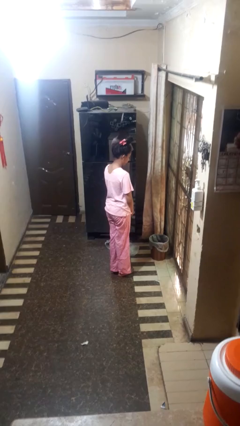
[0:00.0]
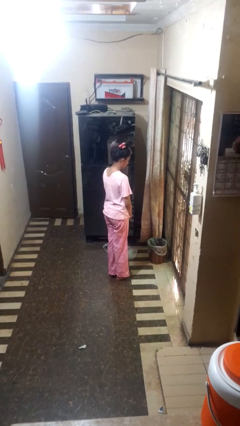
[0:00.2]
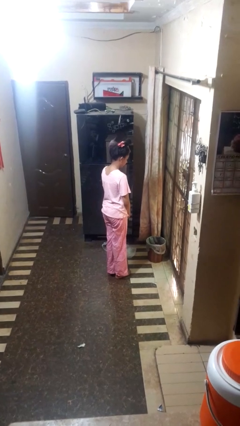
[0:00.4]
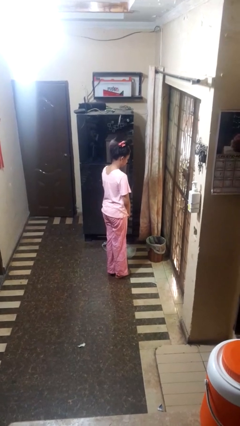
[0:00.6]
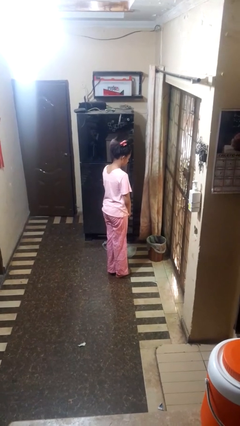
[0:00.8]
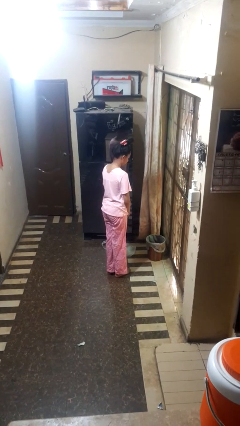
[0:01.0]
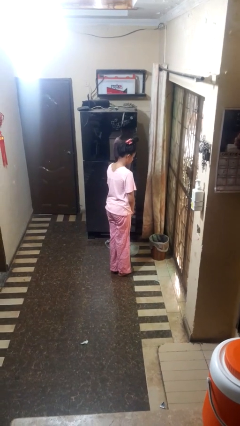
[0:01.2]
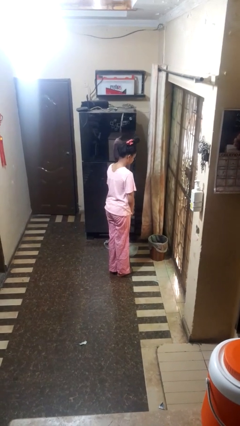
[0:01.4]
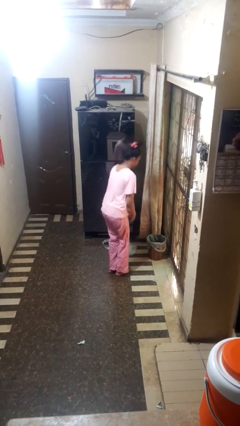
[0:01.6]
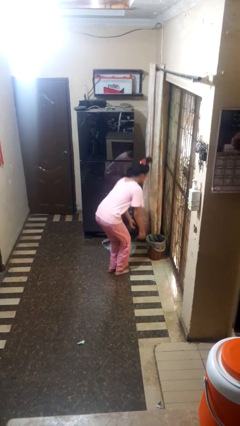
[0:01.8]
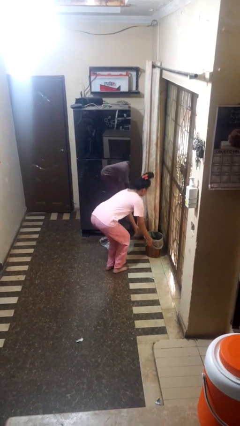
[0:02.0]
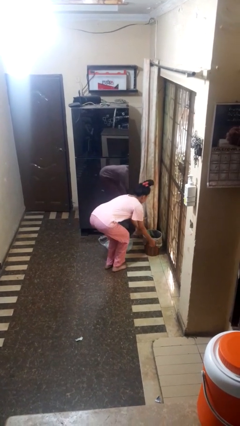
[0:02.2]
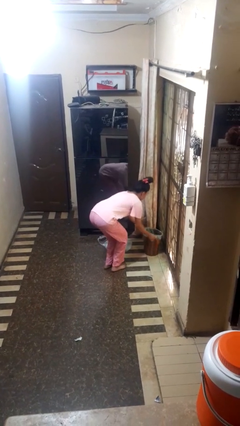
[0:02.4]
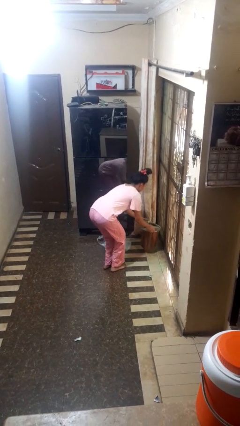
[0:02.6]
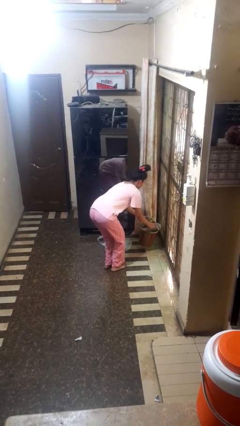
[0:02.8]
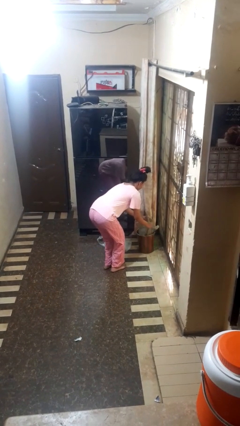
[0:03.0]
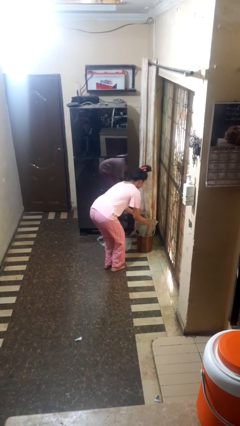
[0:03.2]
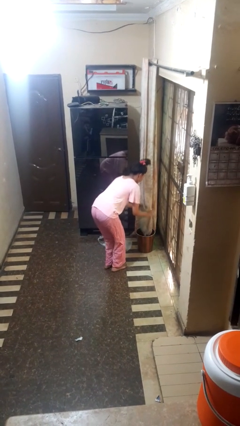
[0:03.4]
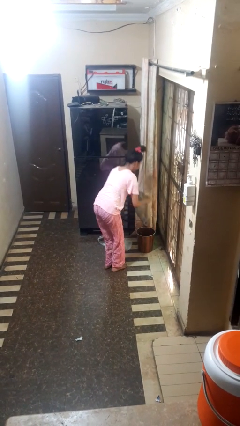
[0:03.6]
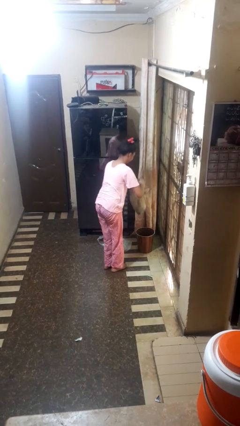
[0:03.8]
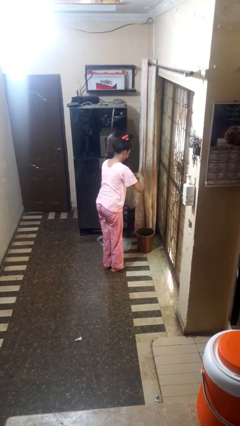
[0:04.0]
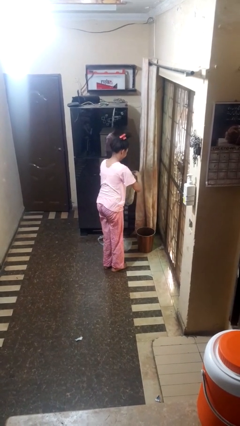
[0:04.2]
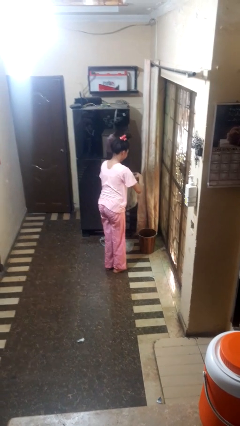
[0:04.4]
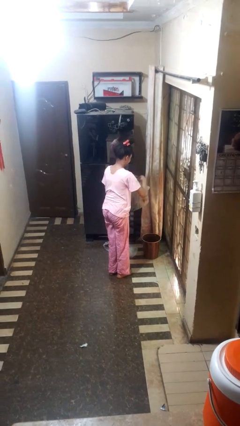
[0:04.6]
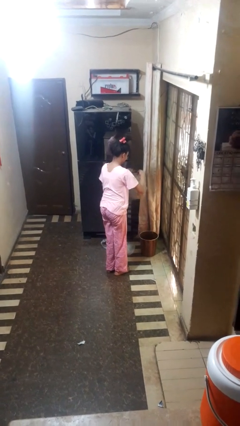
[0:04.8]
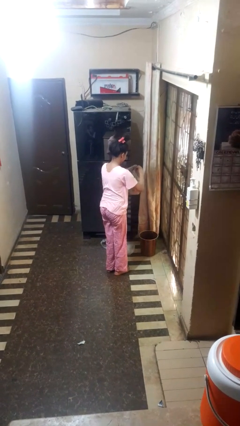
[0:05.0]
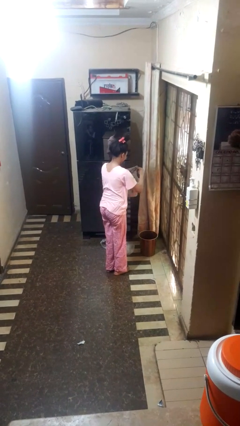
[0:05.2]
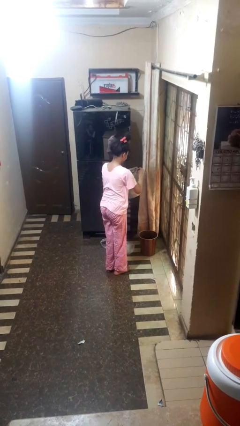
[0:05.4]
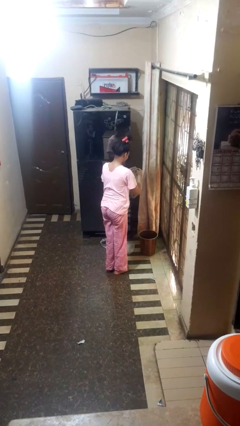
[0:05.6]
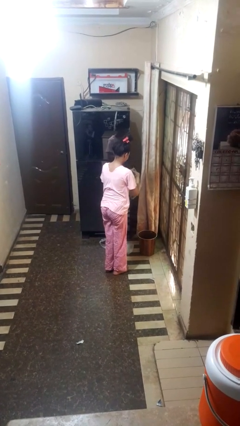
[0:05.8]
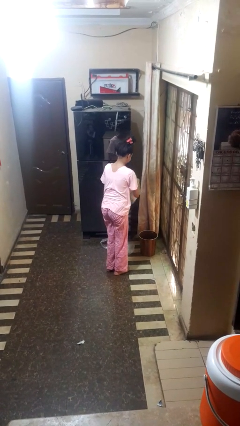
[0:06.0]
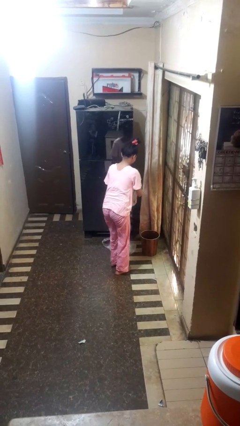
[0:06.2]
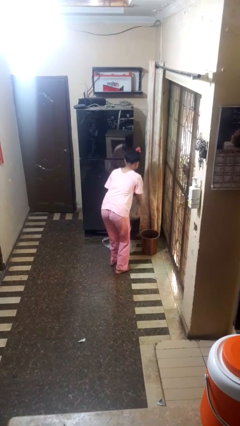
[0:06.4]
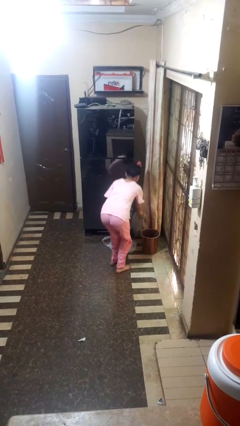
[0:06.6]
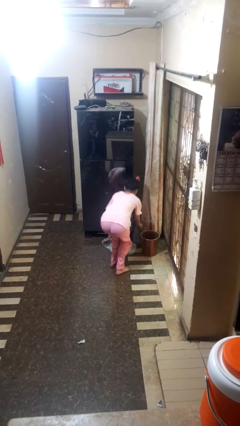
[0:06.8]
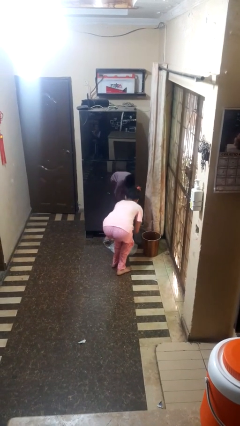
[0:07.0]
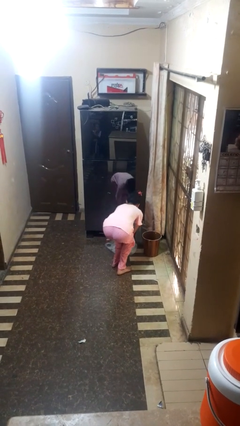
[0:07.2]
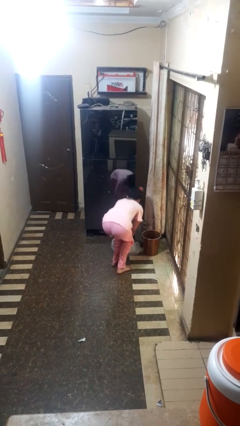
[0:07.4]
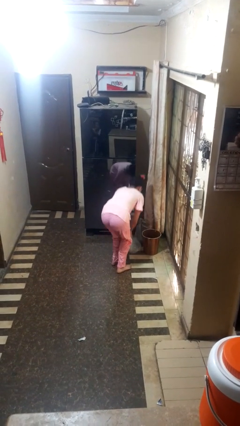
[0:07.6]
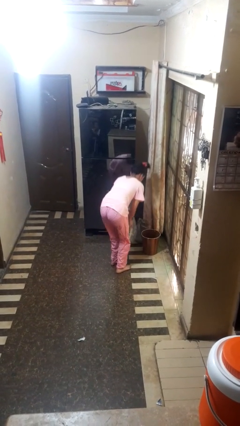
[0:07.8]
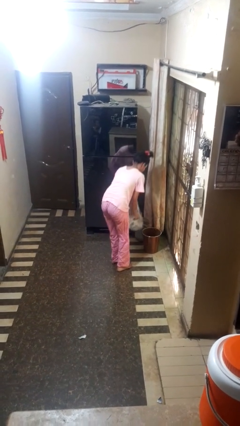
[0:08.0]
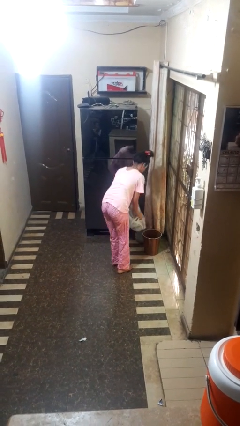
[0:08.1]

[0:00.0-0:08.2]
person removes trashbag from trashcan

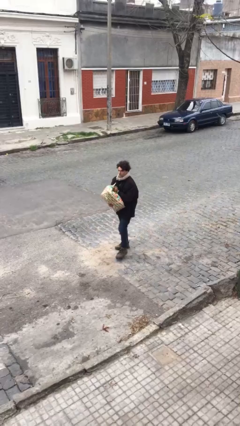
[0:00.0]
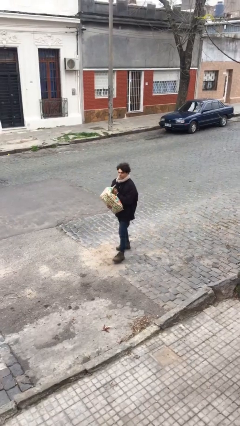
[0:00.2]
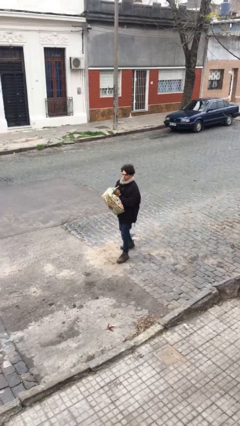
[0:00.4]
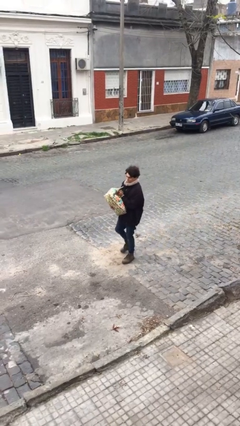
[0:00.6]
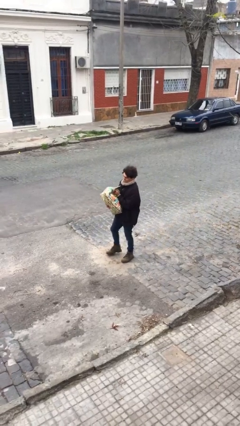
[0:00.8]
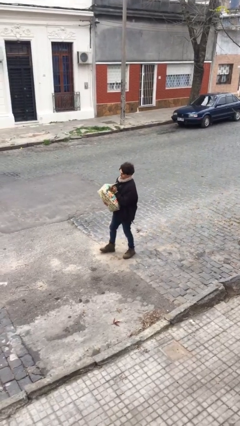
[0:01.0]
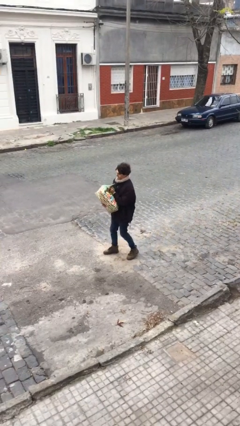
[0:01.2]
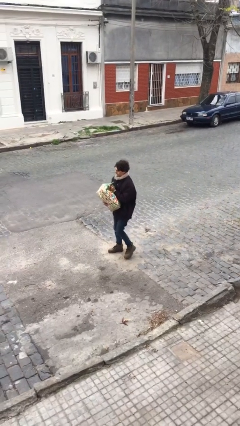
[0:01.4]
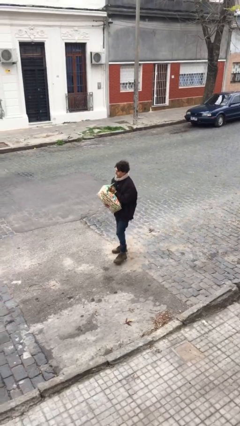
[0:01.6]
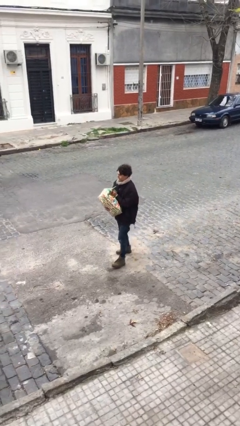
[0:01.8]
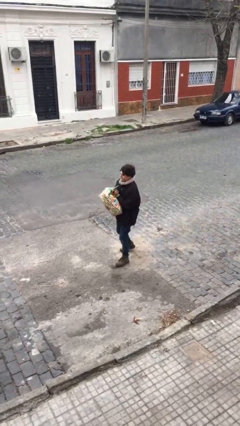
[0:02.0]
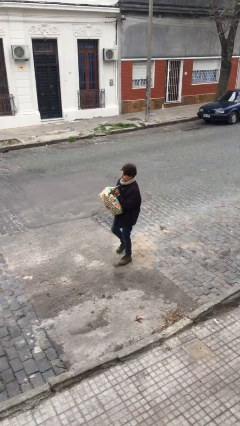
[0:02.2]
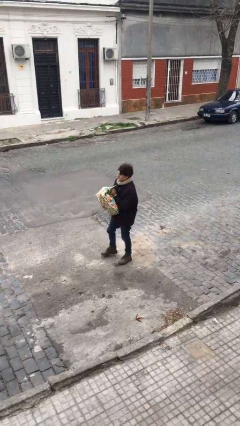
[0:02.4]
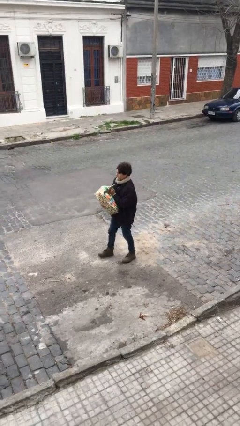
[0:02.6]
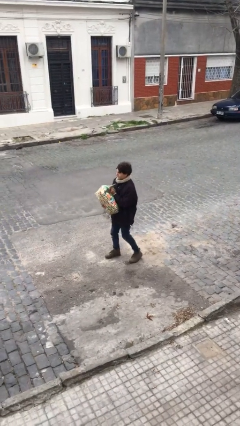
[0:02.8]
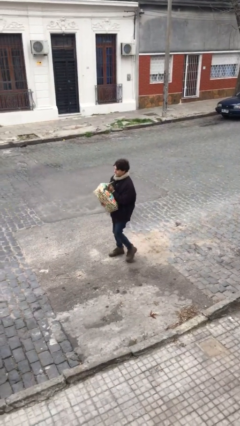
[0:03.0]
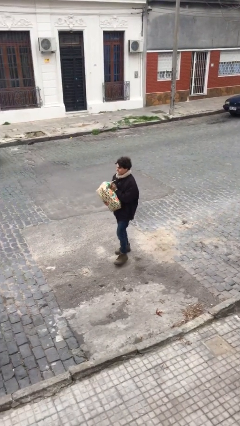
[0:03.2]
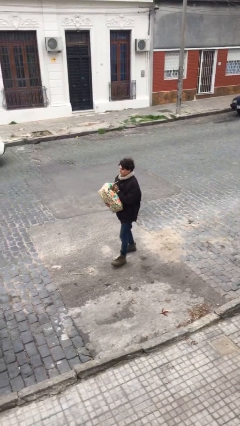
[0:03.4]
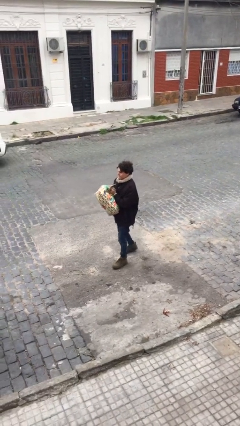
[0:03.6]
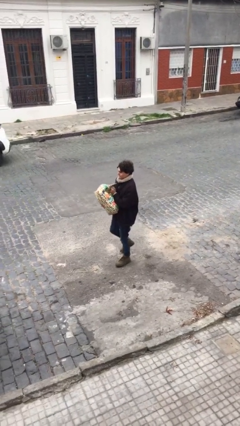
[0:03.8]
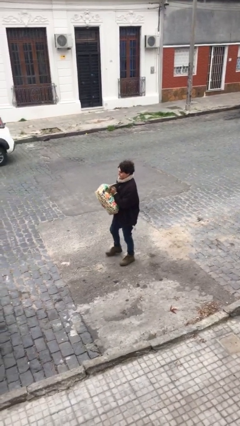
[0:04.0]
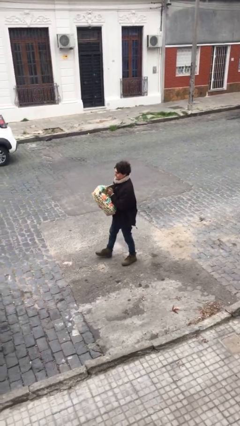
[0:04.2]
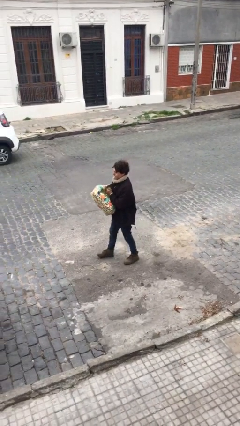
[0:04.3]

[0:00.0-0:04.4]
person carries heavy object

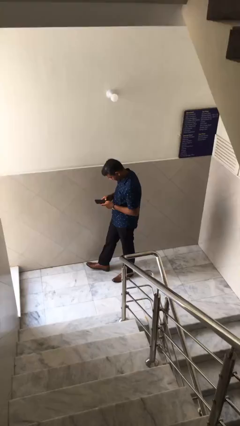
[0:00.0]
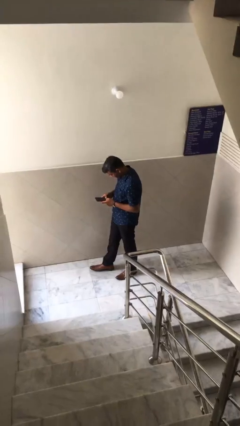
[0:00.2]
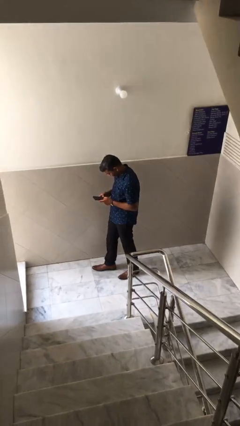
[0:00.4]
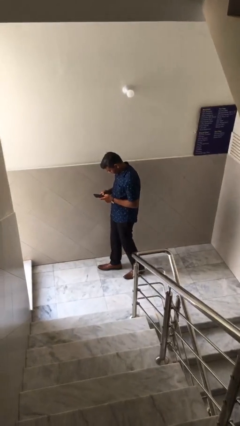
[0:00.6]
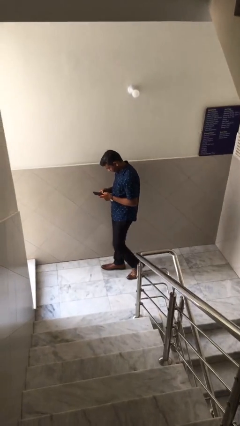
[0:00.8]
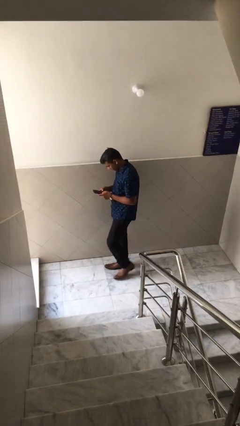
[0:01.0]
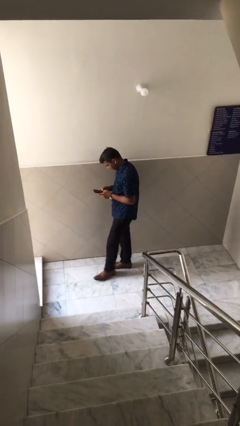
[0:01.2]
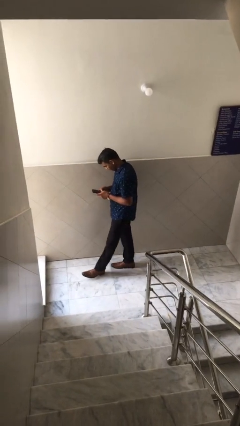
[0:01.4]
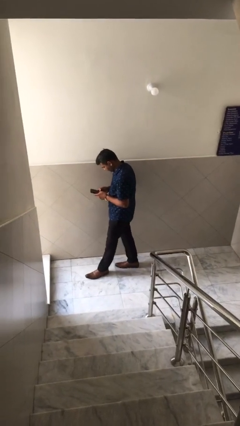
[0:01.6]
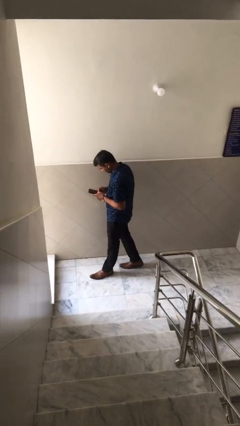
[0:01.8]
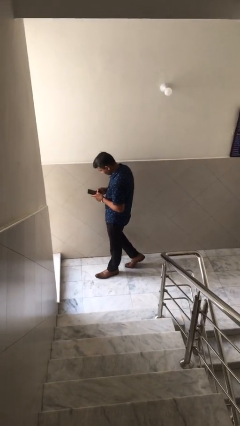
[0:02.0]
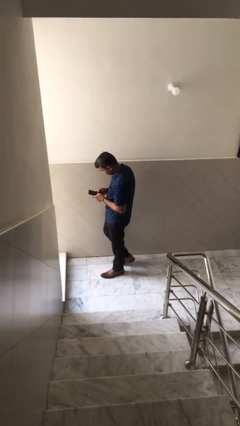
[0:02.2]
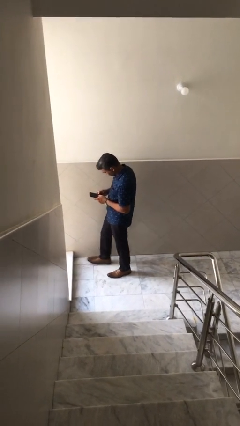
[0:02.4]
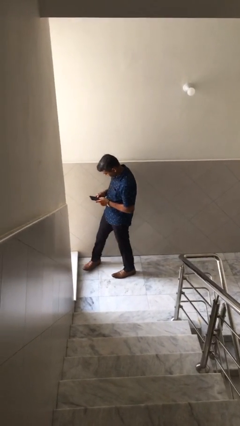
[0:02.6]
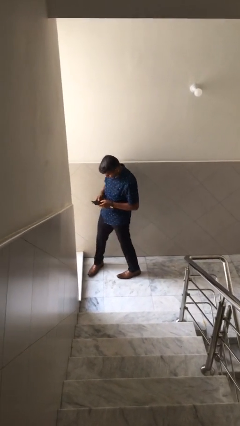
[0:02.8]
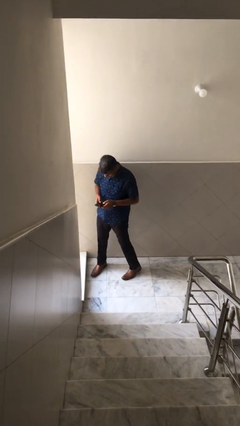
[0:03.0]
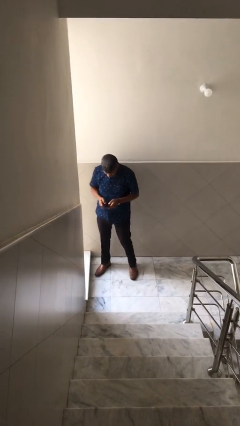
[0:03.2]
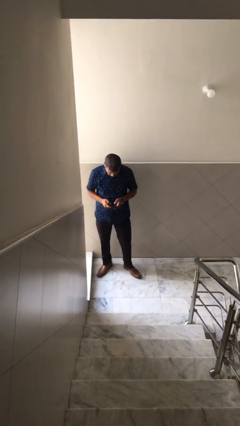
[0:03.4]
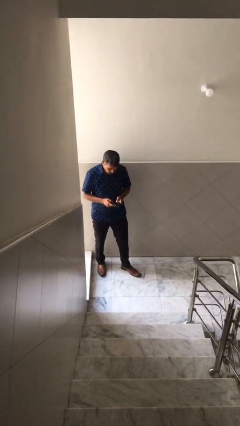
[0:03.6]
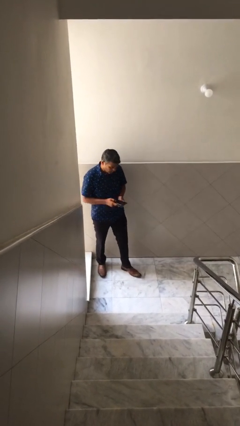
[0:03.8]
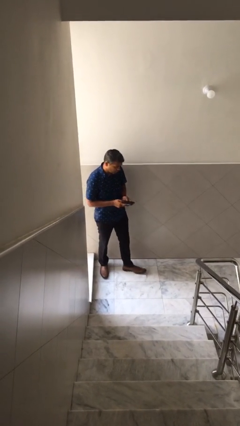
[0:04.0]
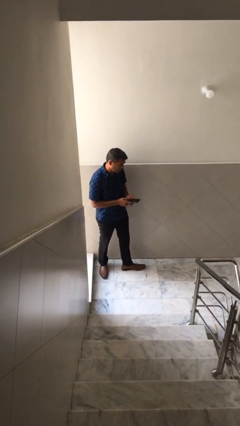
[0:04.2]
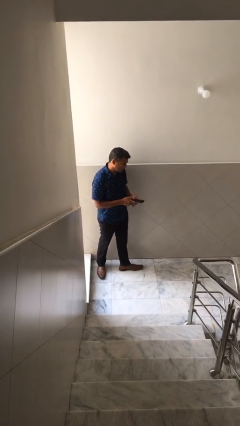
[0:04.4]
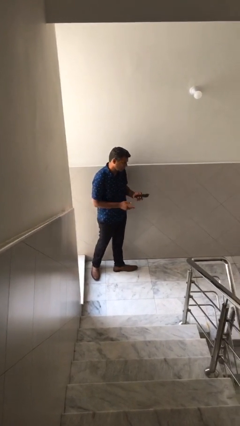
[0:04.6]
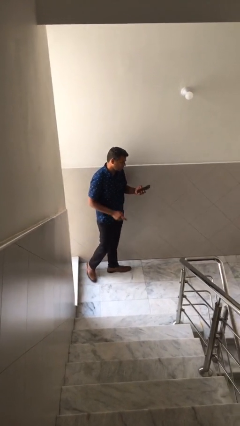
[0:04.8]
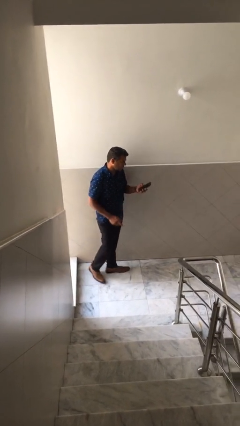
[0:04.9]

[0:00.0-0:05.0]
person texts on phone
